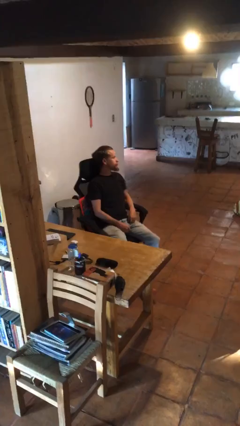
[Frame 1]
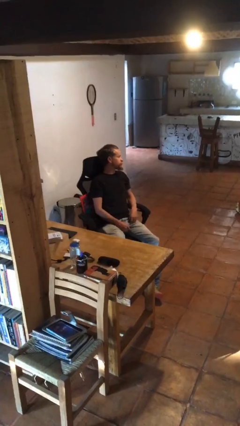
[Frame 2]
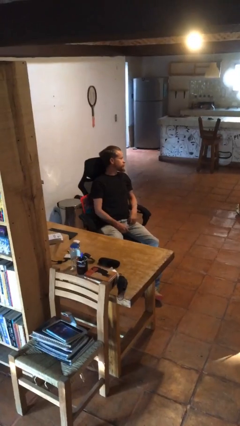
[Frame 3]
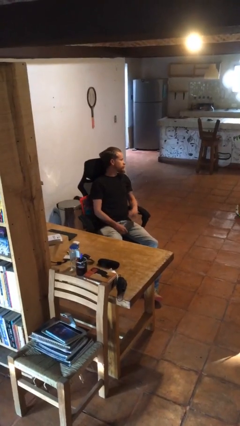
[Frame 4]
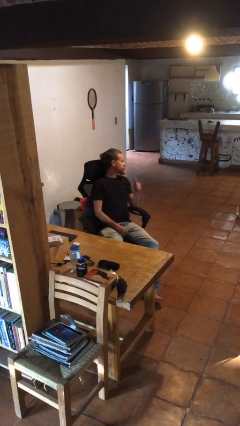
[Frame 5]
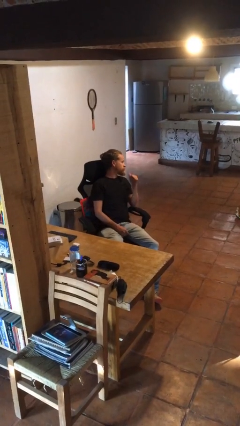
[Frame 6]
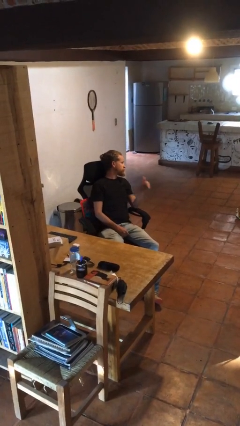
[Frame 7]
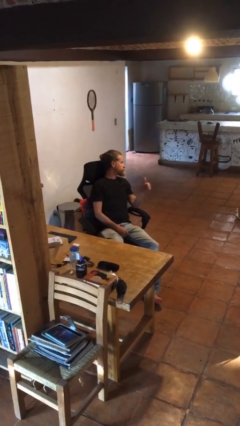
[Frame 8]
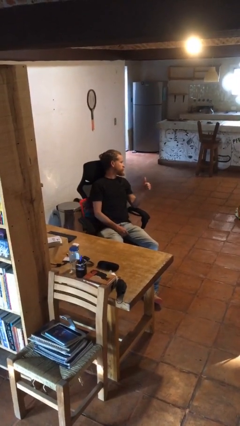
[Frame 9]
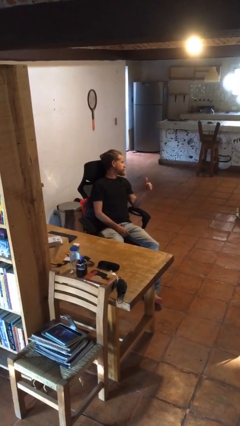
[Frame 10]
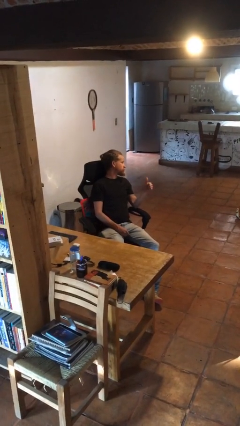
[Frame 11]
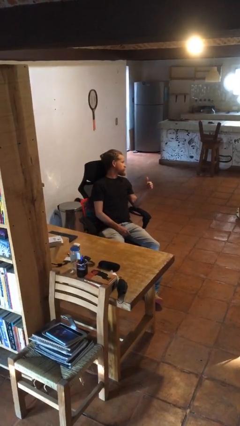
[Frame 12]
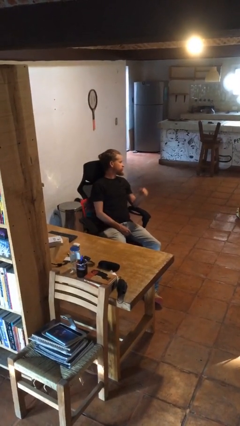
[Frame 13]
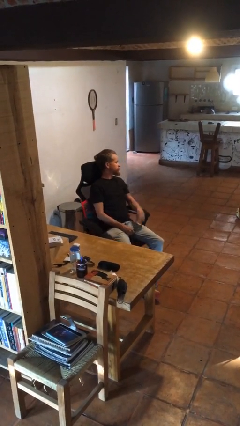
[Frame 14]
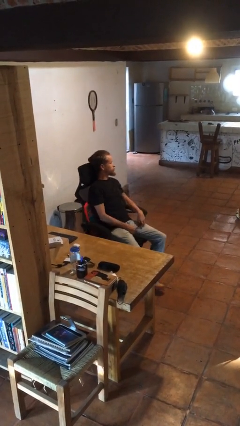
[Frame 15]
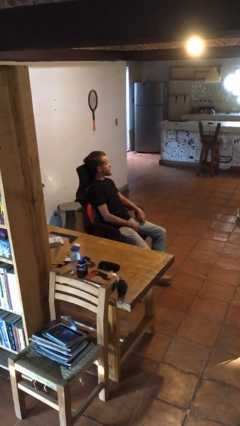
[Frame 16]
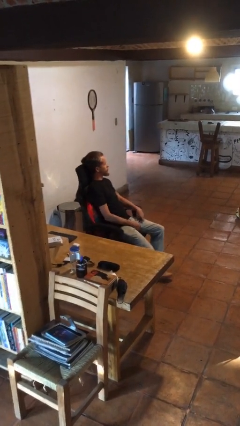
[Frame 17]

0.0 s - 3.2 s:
person gestures thumbs up

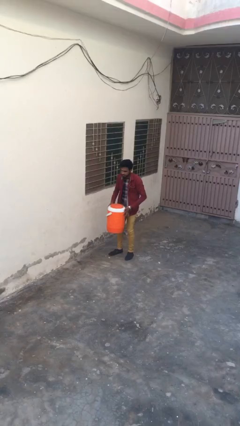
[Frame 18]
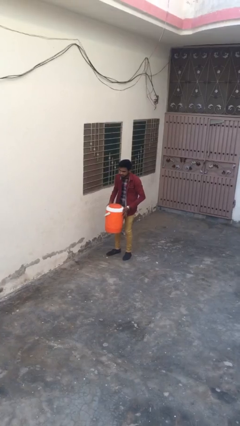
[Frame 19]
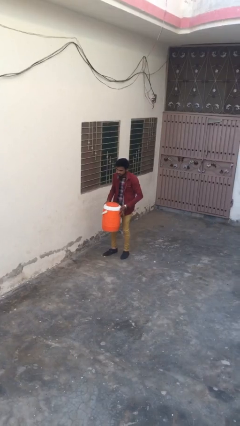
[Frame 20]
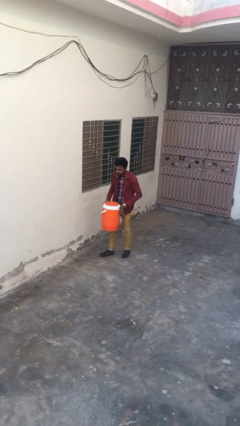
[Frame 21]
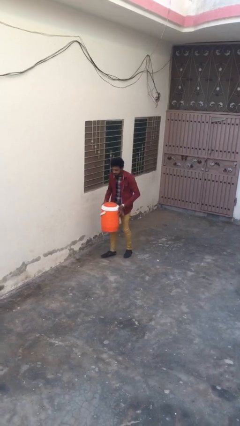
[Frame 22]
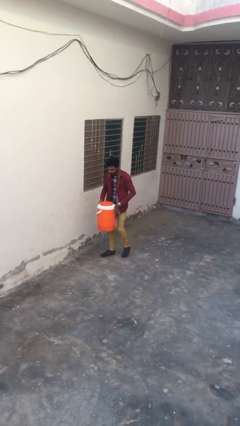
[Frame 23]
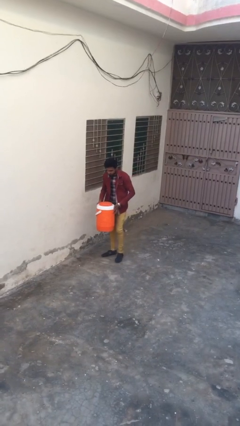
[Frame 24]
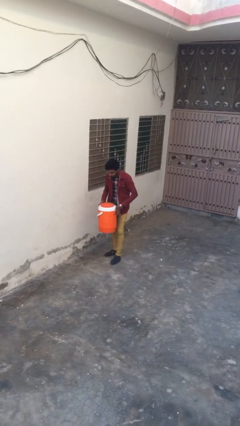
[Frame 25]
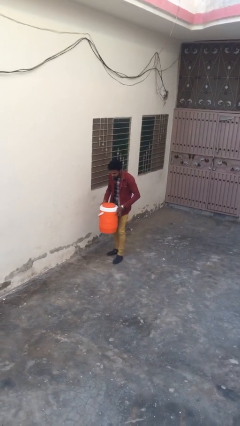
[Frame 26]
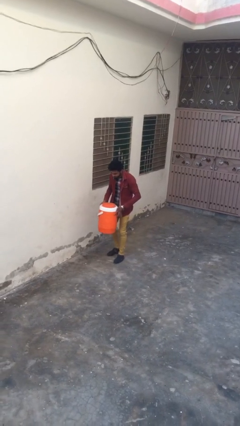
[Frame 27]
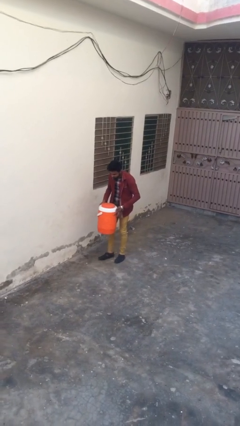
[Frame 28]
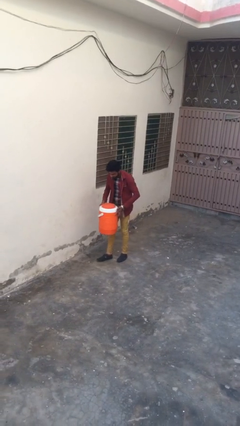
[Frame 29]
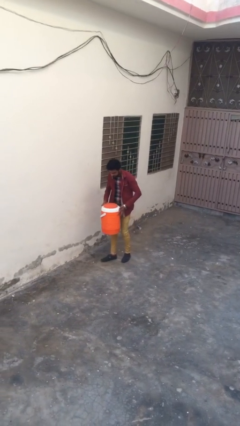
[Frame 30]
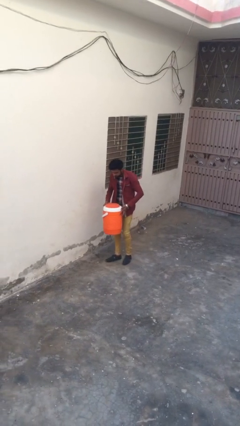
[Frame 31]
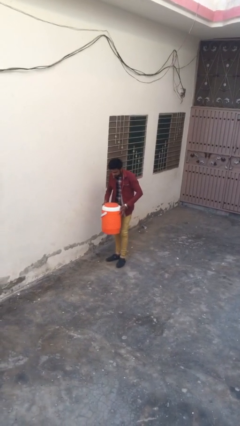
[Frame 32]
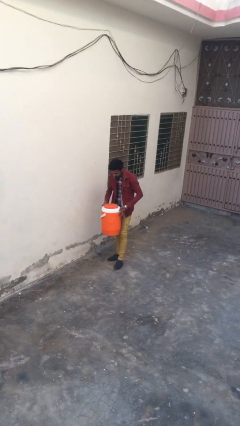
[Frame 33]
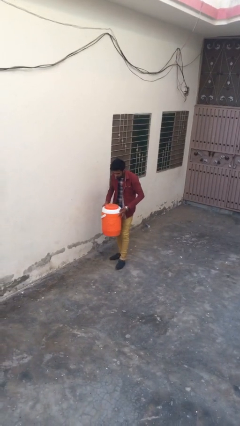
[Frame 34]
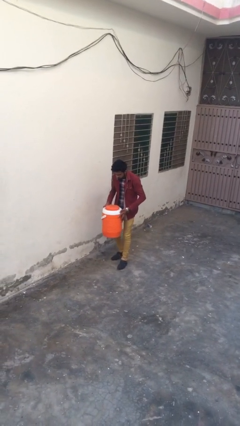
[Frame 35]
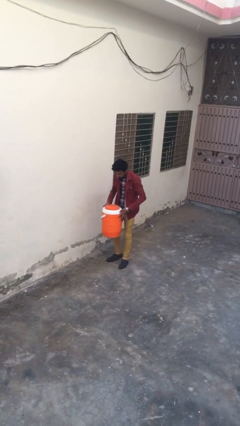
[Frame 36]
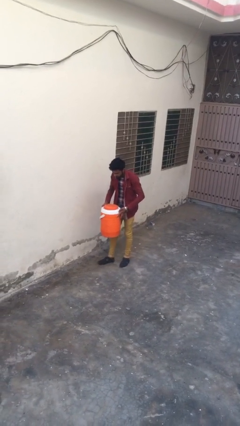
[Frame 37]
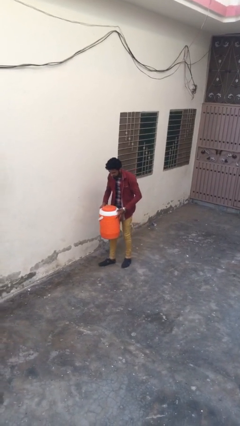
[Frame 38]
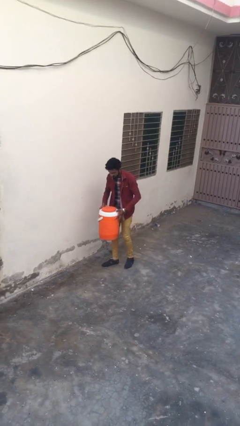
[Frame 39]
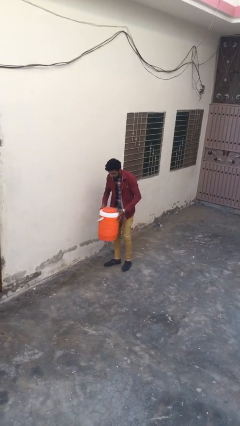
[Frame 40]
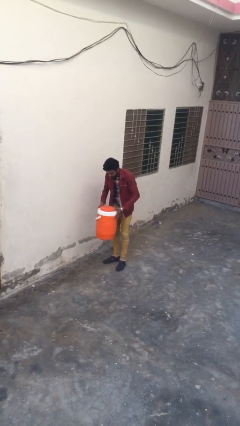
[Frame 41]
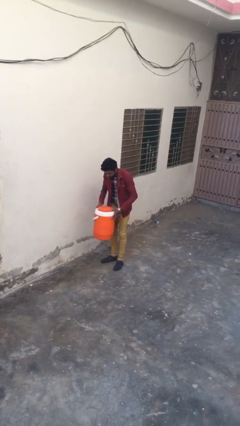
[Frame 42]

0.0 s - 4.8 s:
person carries heavy object

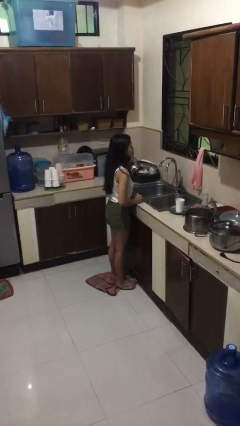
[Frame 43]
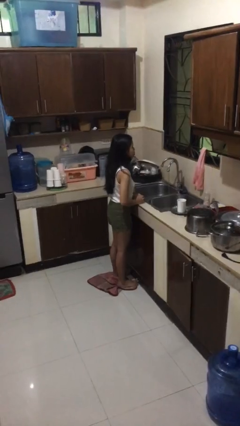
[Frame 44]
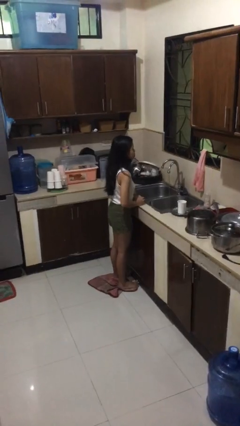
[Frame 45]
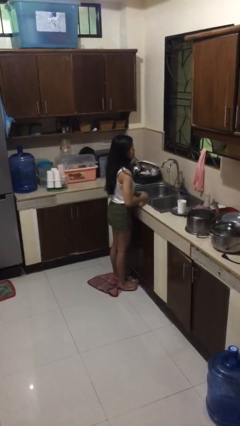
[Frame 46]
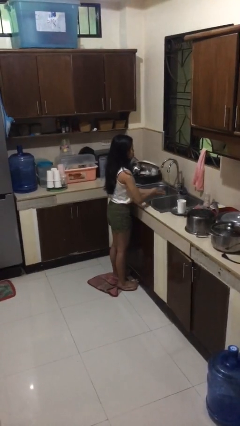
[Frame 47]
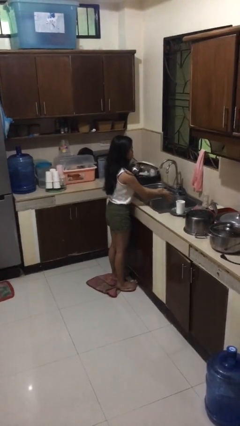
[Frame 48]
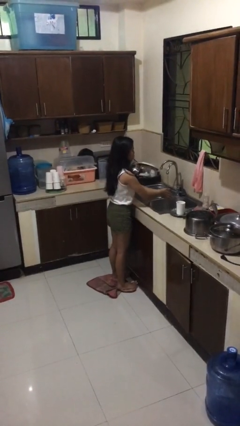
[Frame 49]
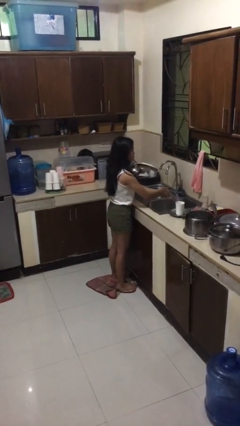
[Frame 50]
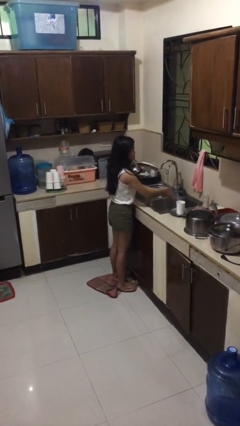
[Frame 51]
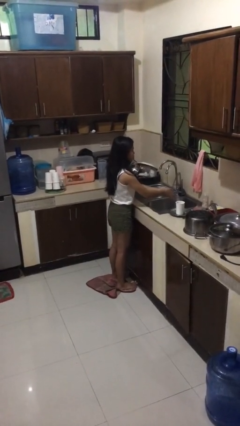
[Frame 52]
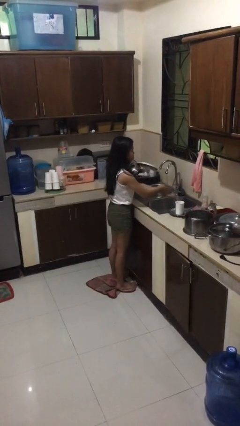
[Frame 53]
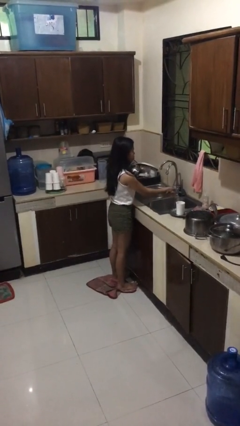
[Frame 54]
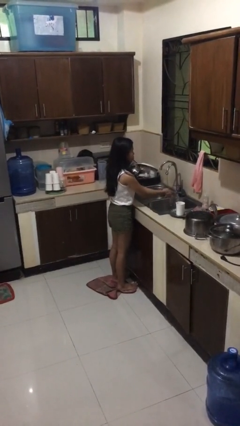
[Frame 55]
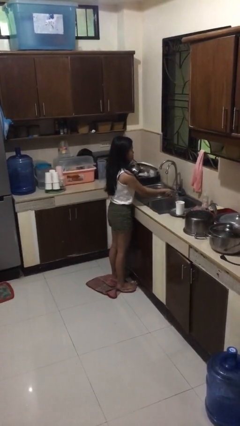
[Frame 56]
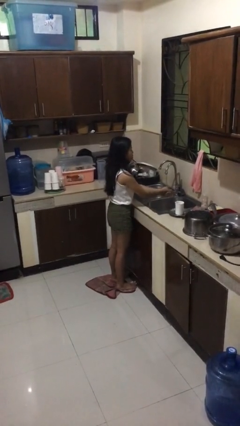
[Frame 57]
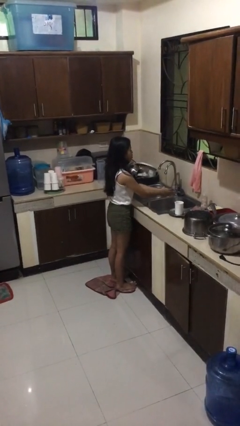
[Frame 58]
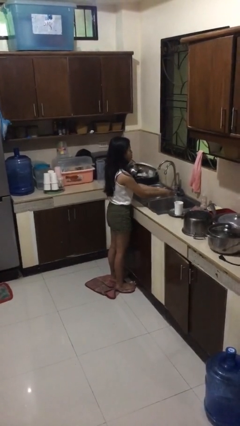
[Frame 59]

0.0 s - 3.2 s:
person washes hands

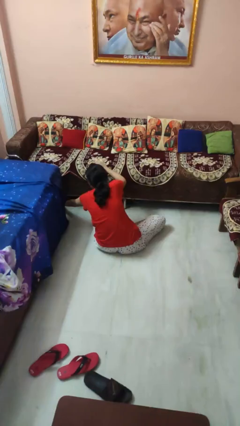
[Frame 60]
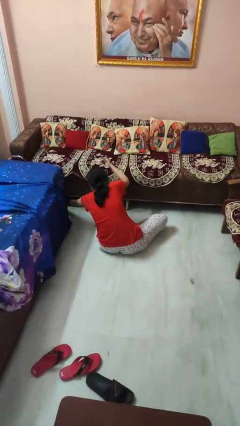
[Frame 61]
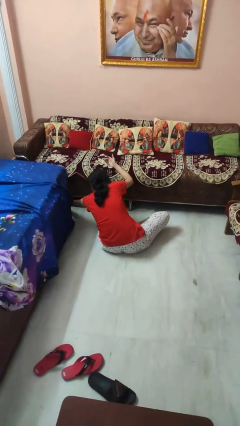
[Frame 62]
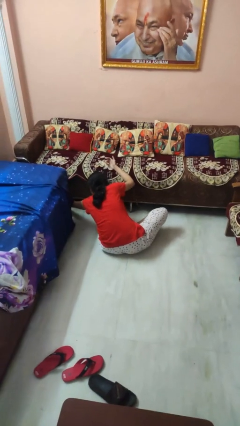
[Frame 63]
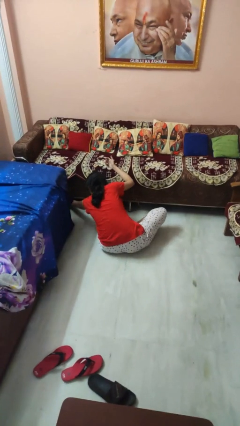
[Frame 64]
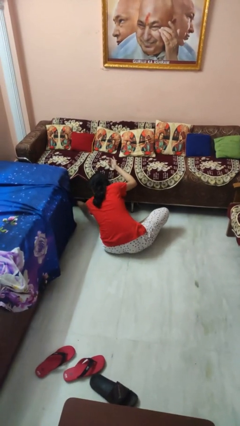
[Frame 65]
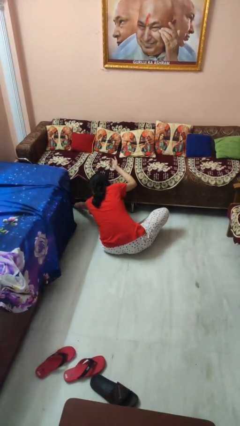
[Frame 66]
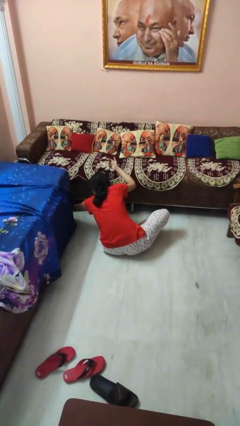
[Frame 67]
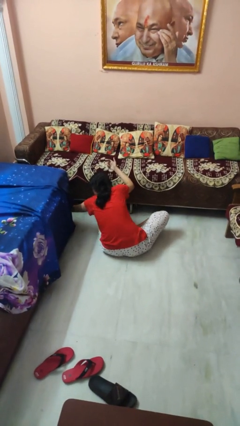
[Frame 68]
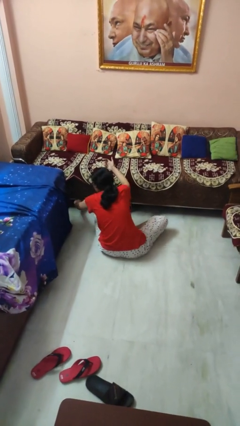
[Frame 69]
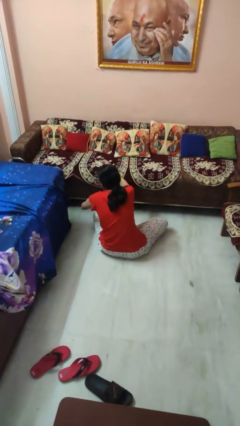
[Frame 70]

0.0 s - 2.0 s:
person searches under couch

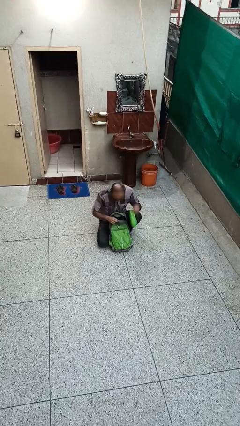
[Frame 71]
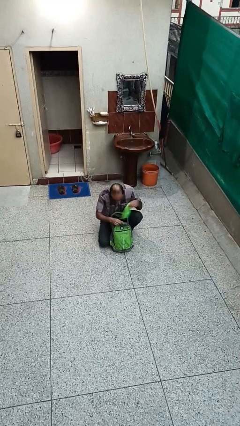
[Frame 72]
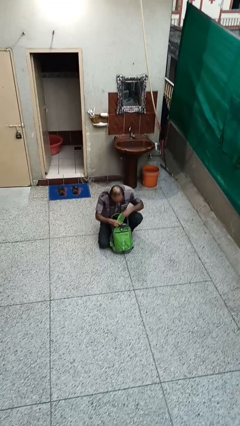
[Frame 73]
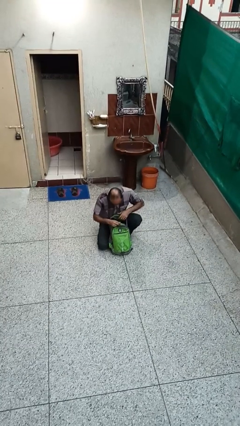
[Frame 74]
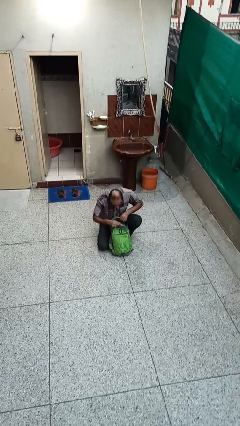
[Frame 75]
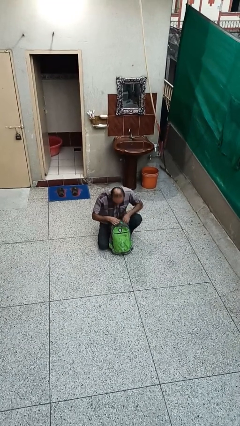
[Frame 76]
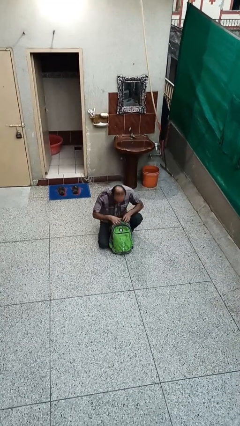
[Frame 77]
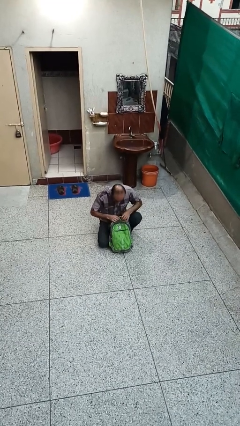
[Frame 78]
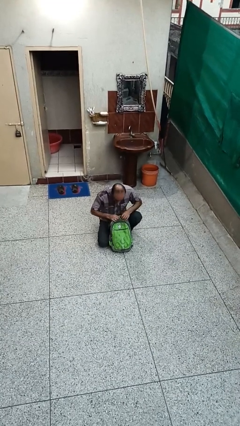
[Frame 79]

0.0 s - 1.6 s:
person puts object into backpack

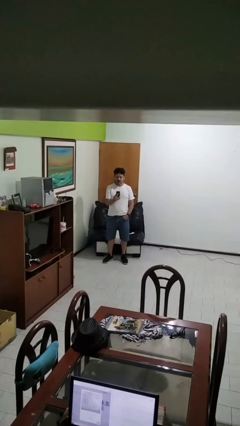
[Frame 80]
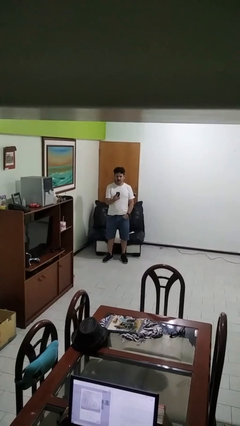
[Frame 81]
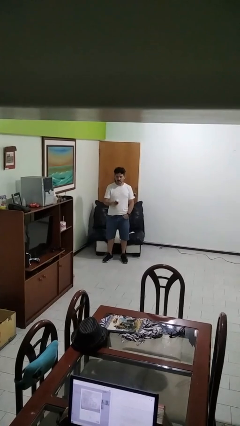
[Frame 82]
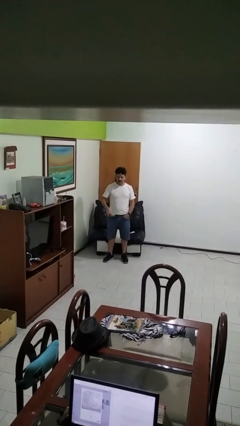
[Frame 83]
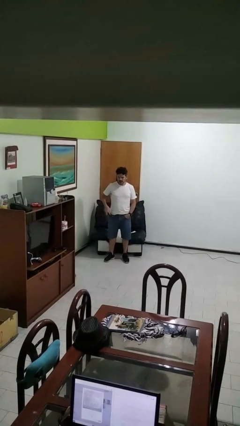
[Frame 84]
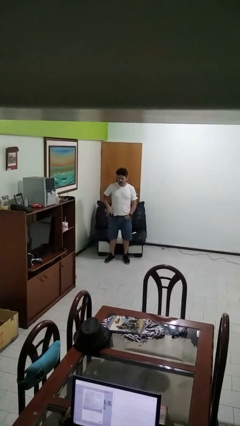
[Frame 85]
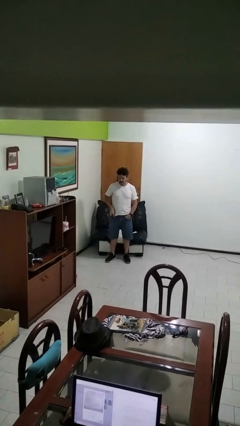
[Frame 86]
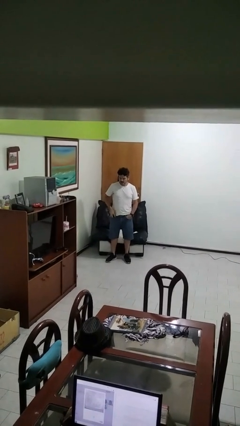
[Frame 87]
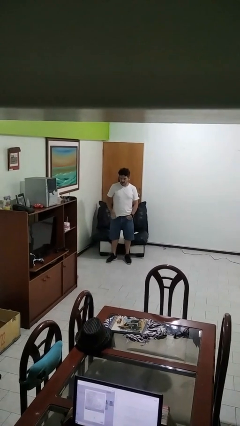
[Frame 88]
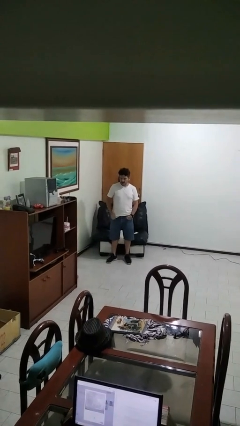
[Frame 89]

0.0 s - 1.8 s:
person puts phone into pocket

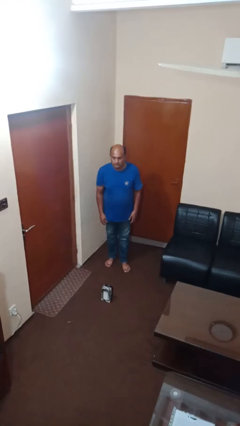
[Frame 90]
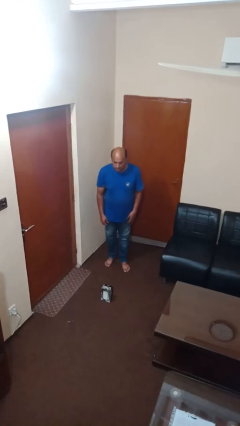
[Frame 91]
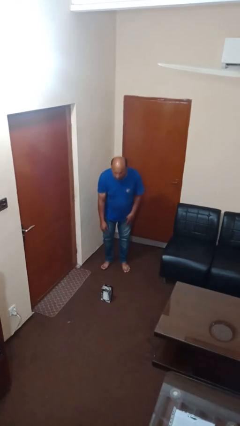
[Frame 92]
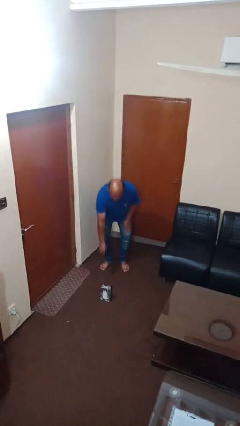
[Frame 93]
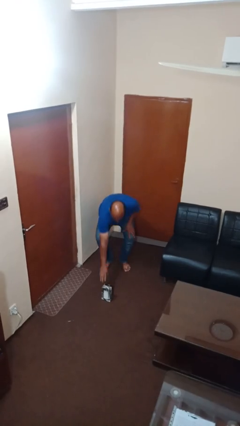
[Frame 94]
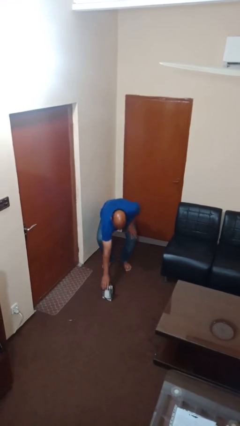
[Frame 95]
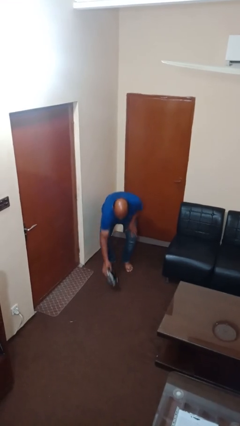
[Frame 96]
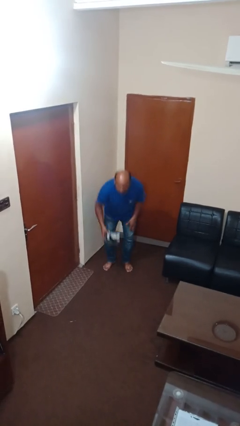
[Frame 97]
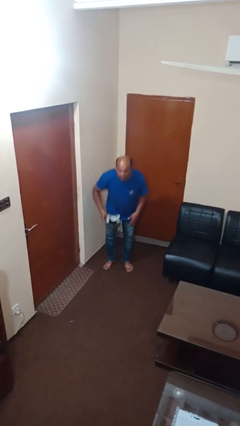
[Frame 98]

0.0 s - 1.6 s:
person picks up object from floor
